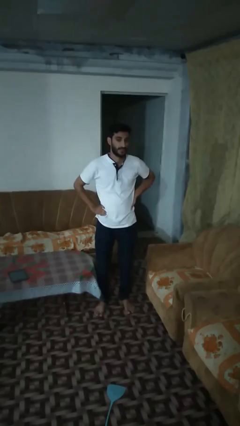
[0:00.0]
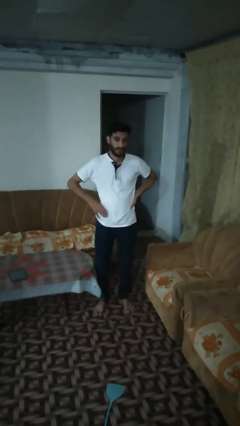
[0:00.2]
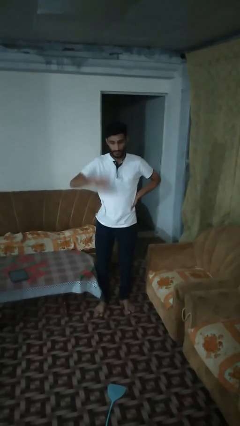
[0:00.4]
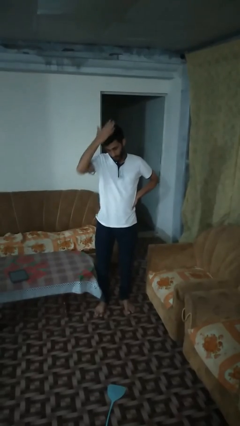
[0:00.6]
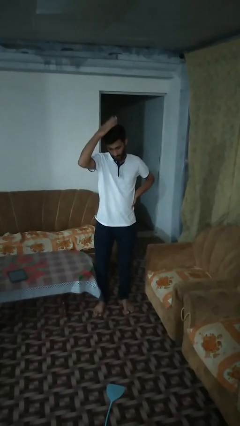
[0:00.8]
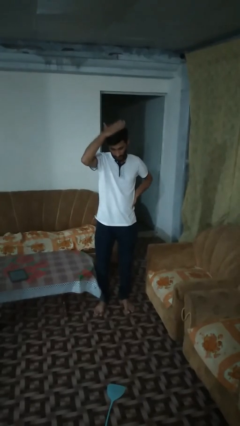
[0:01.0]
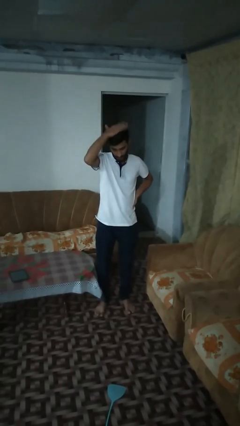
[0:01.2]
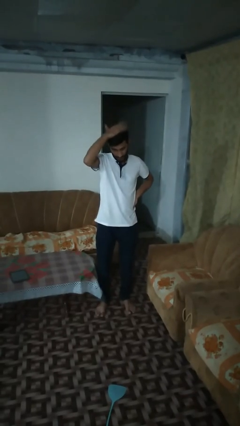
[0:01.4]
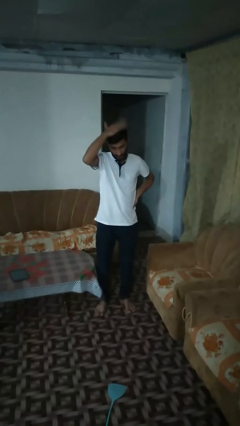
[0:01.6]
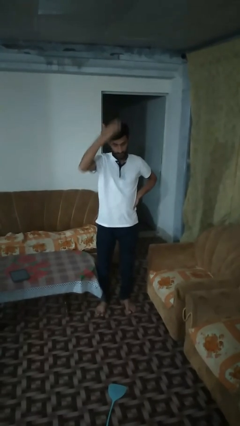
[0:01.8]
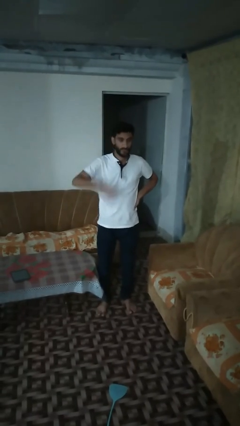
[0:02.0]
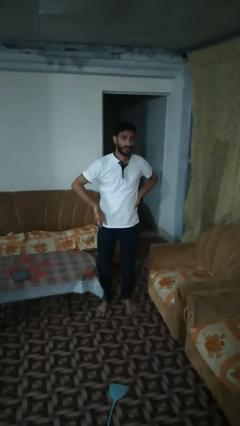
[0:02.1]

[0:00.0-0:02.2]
person pats head

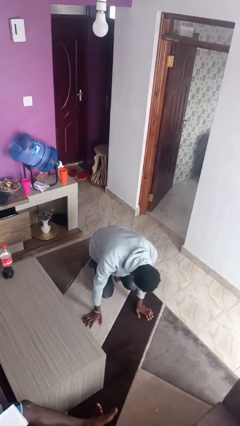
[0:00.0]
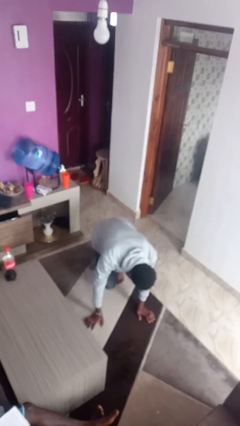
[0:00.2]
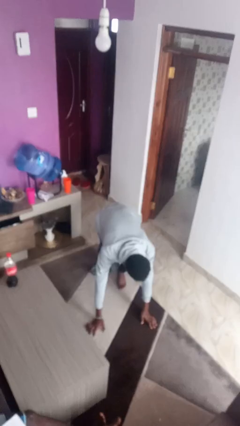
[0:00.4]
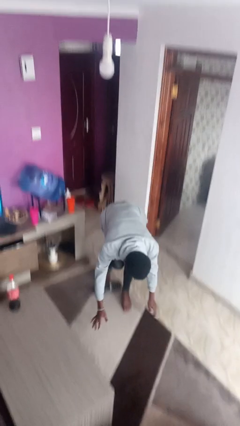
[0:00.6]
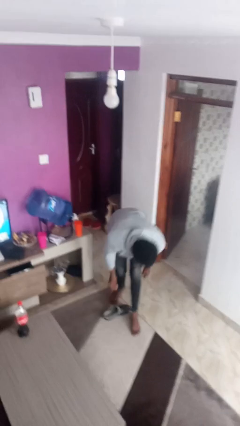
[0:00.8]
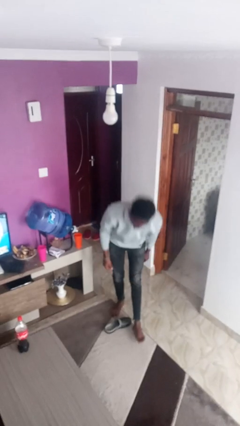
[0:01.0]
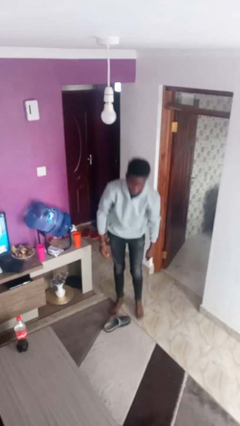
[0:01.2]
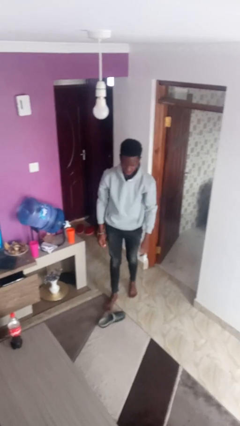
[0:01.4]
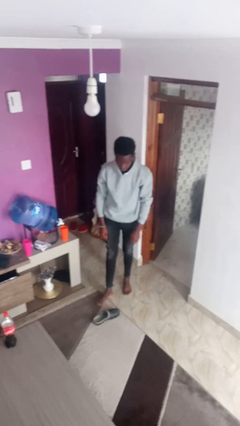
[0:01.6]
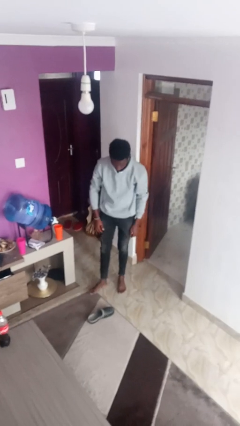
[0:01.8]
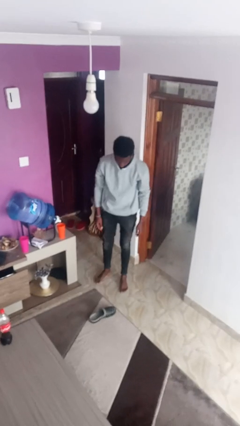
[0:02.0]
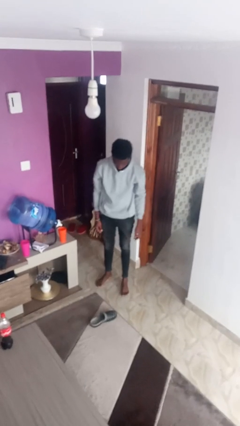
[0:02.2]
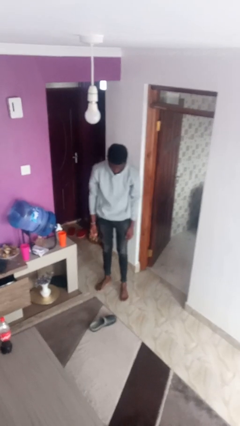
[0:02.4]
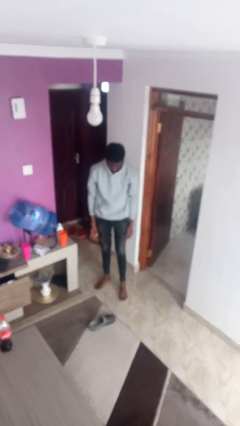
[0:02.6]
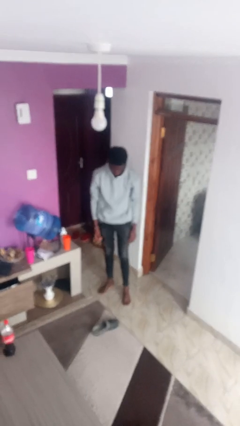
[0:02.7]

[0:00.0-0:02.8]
person stands up from floor

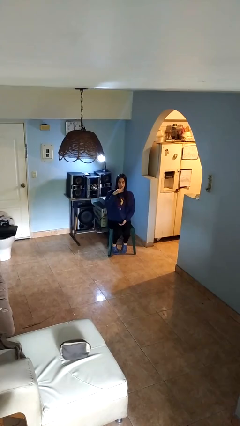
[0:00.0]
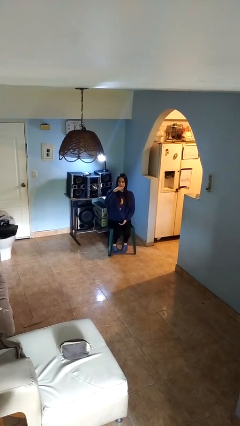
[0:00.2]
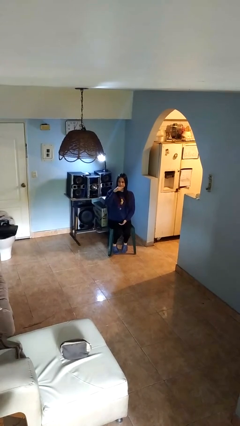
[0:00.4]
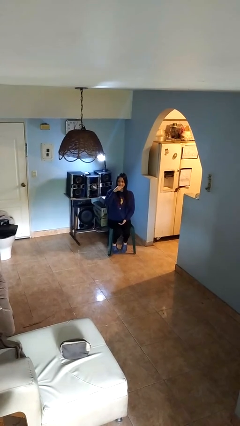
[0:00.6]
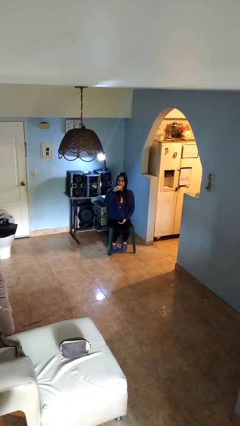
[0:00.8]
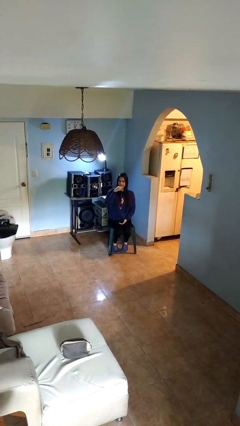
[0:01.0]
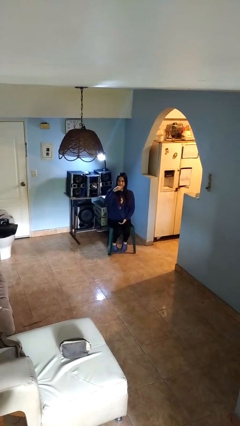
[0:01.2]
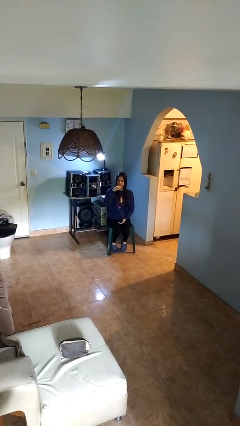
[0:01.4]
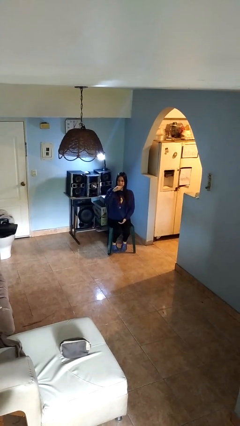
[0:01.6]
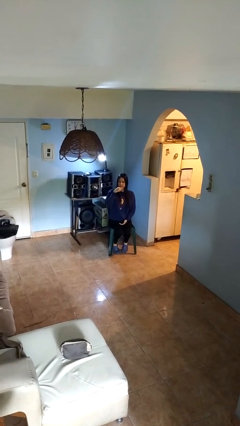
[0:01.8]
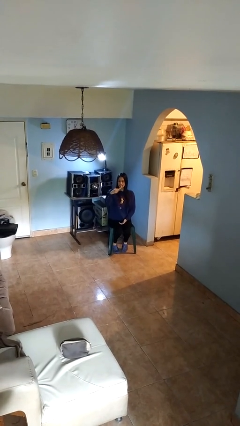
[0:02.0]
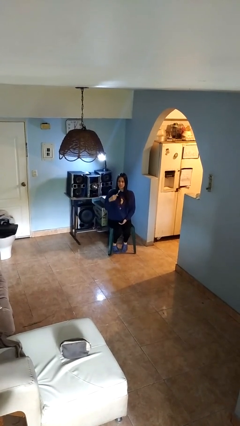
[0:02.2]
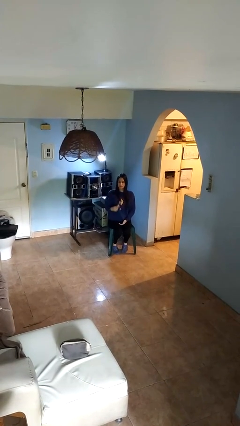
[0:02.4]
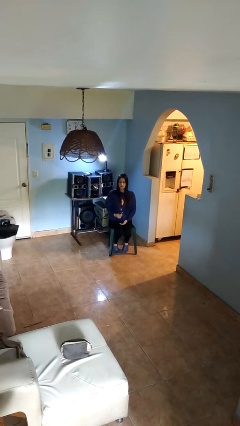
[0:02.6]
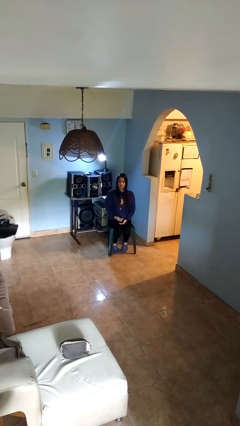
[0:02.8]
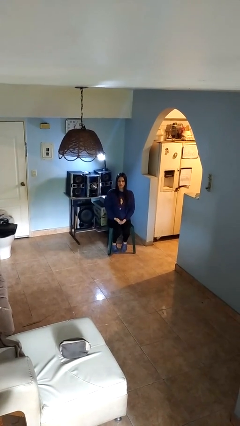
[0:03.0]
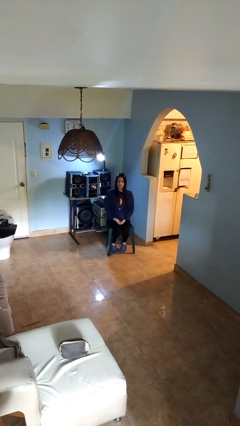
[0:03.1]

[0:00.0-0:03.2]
person brushes teeth

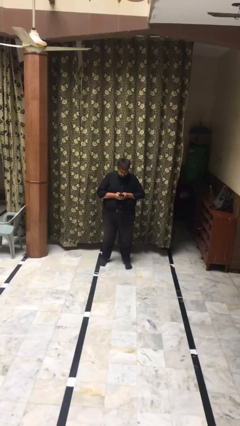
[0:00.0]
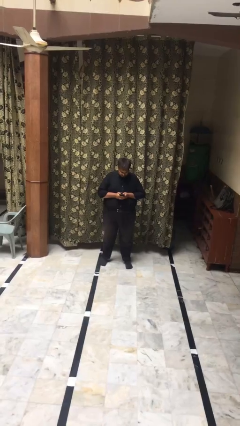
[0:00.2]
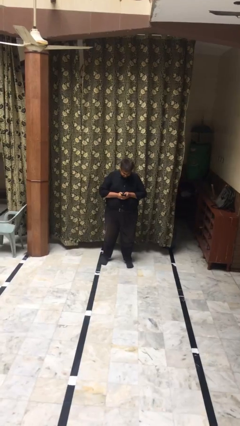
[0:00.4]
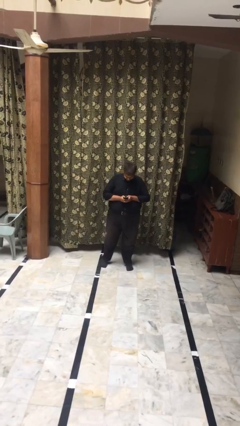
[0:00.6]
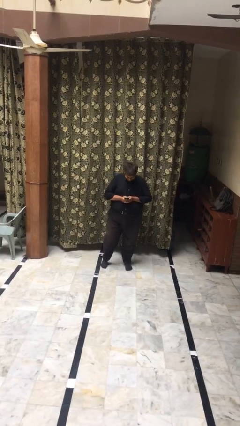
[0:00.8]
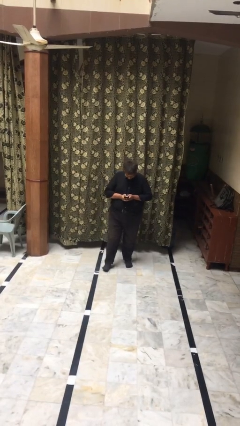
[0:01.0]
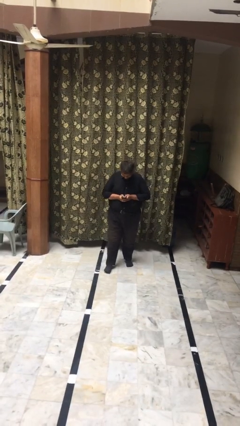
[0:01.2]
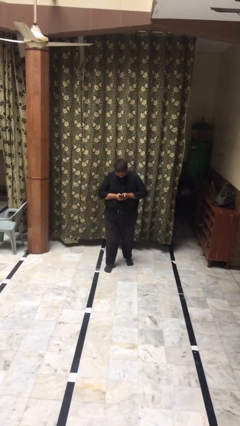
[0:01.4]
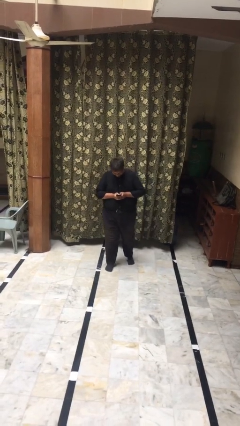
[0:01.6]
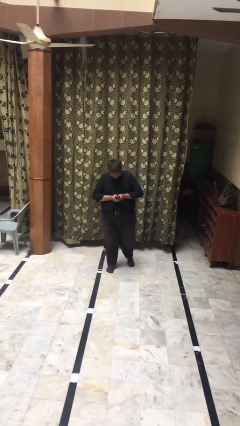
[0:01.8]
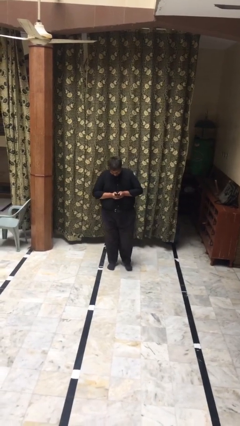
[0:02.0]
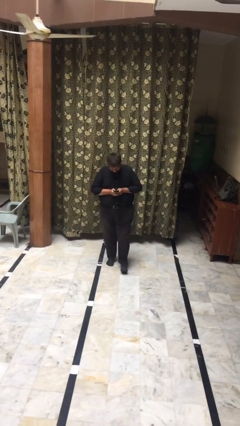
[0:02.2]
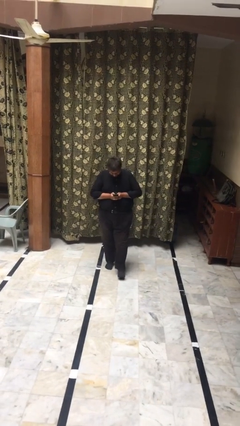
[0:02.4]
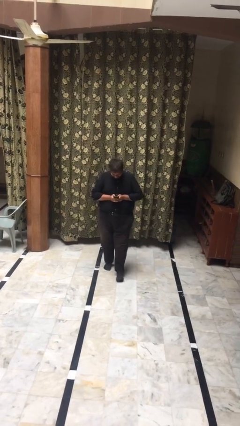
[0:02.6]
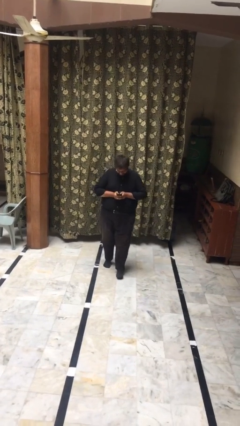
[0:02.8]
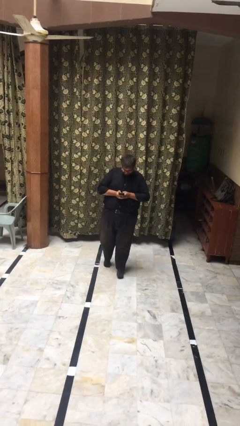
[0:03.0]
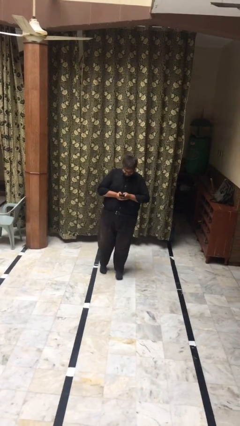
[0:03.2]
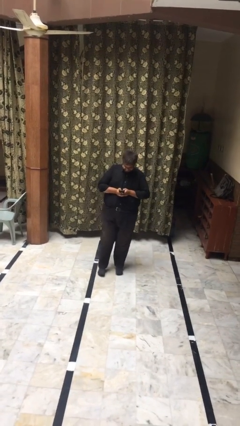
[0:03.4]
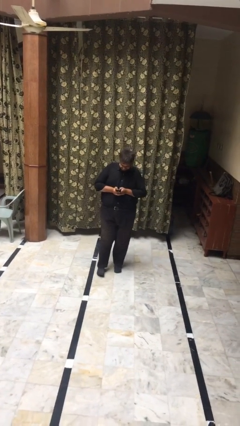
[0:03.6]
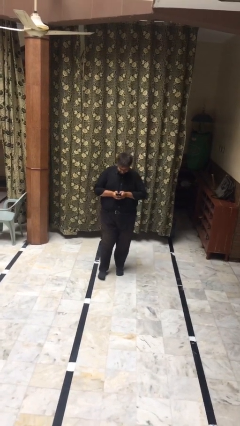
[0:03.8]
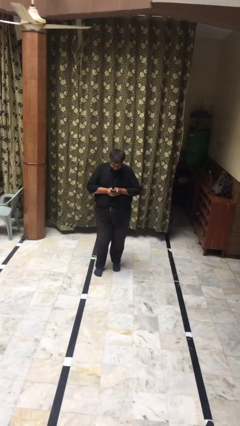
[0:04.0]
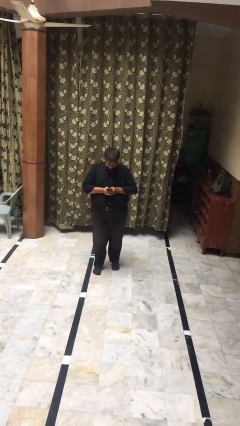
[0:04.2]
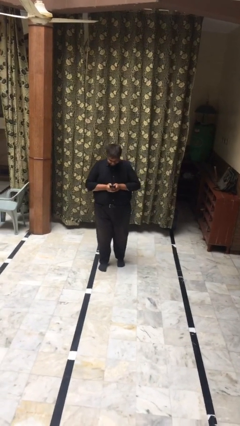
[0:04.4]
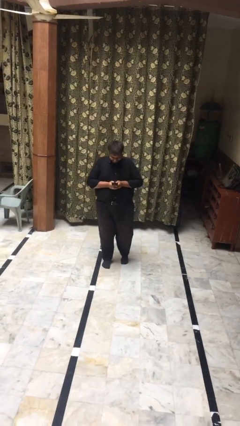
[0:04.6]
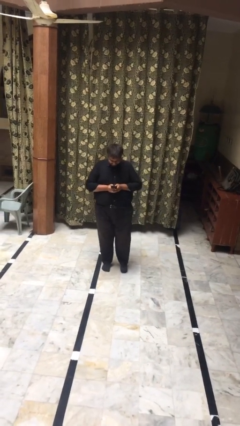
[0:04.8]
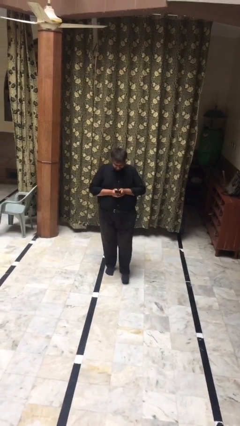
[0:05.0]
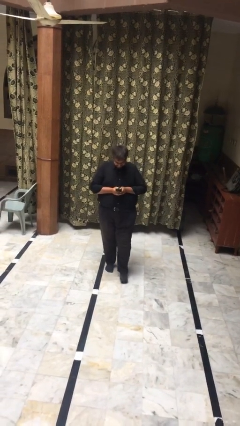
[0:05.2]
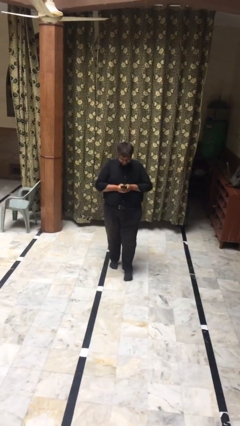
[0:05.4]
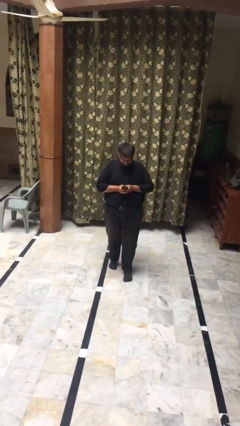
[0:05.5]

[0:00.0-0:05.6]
person texts on phone

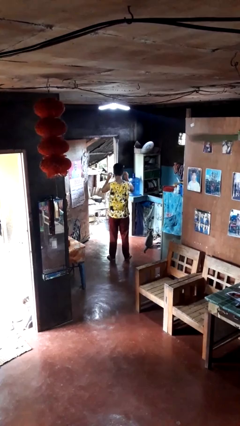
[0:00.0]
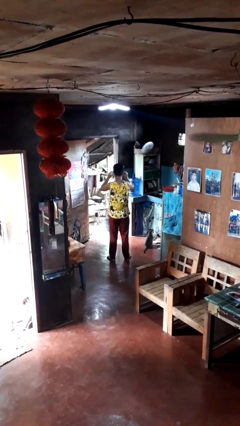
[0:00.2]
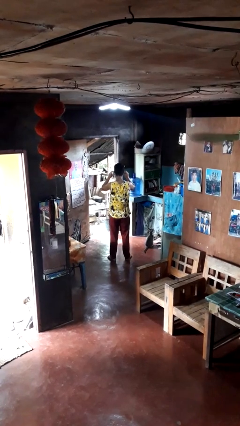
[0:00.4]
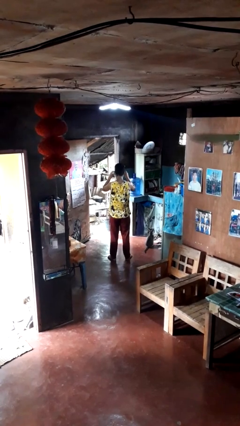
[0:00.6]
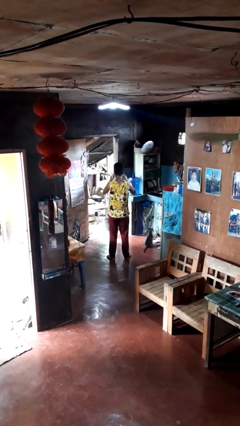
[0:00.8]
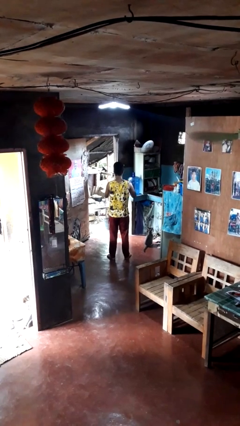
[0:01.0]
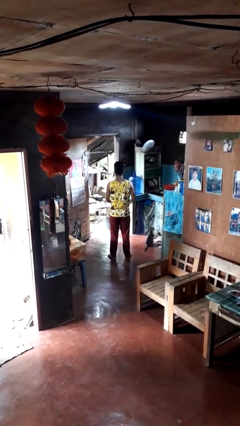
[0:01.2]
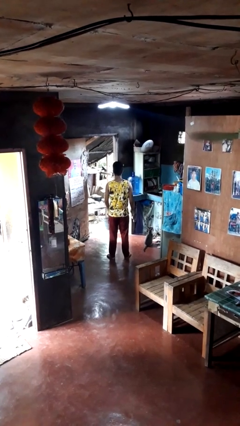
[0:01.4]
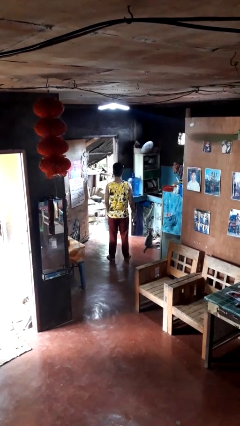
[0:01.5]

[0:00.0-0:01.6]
person takes off glasses

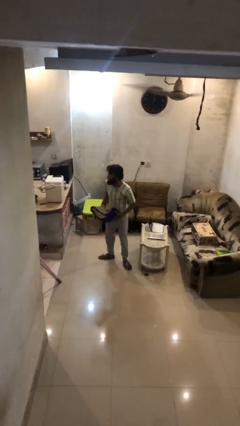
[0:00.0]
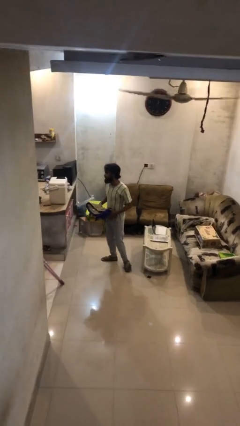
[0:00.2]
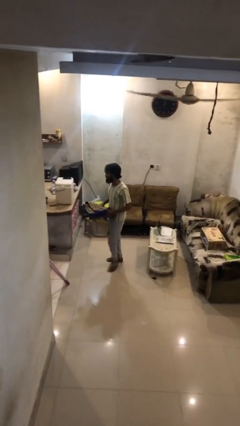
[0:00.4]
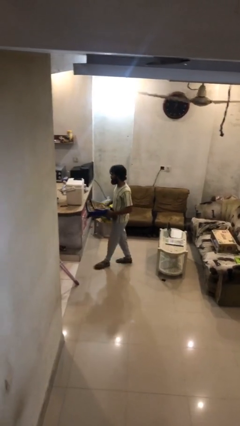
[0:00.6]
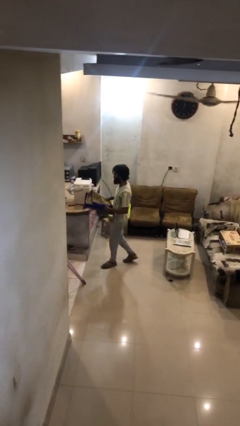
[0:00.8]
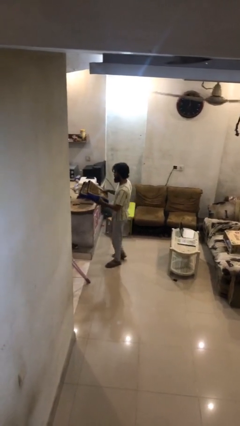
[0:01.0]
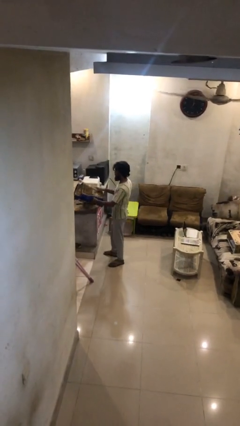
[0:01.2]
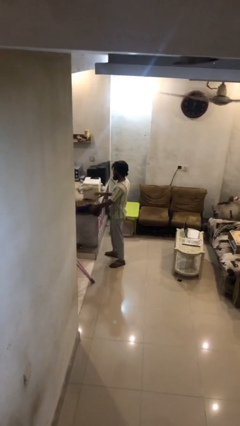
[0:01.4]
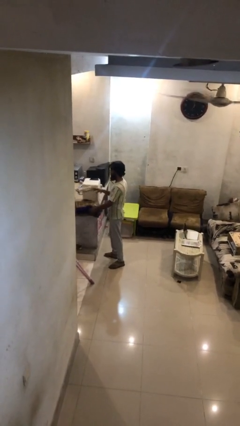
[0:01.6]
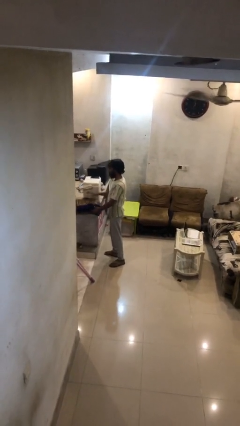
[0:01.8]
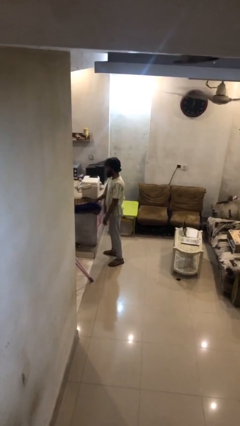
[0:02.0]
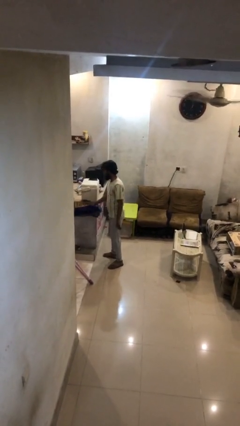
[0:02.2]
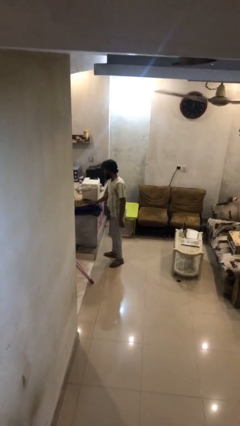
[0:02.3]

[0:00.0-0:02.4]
person puts down object on shelf
